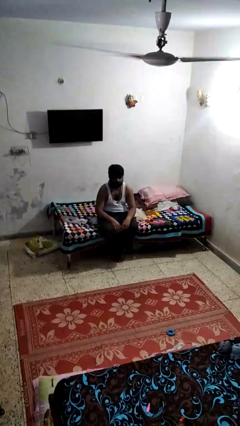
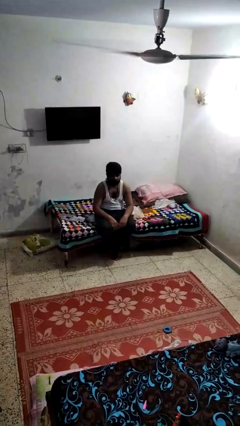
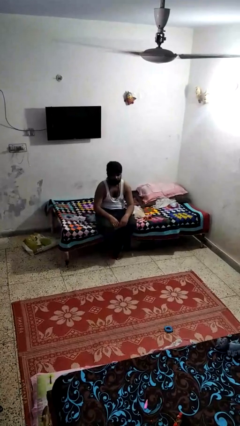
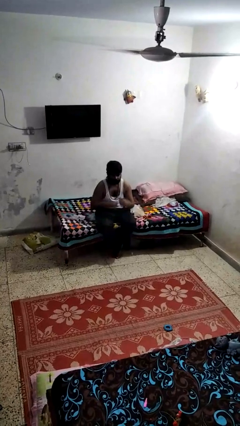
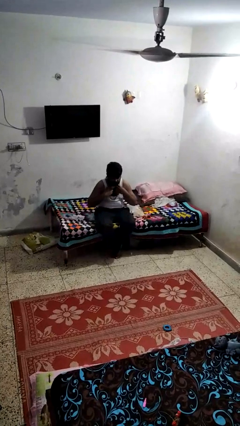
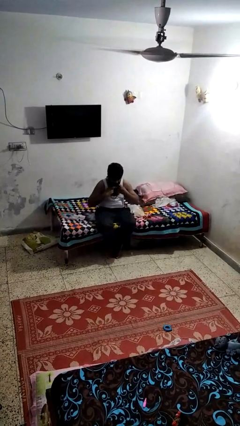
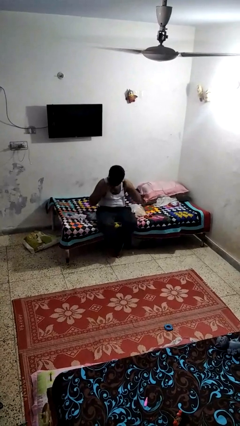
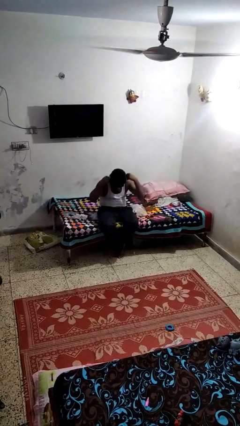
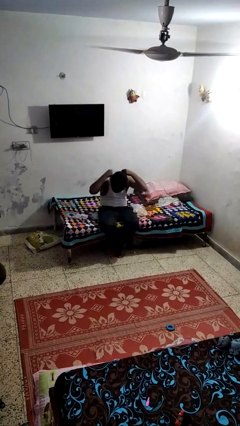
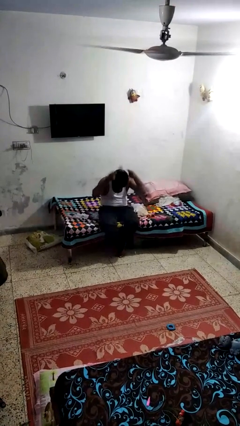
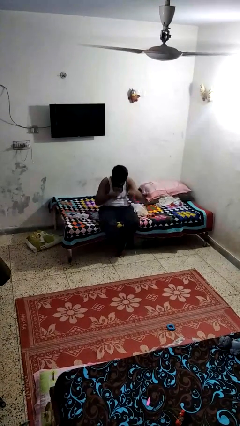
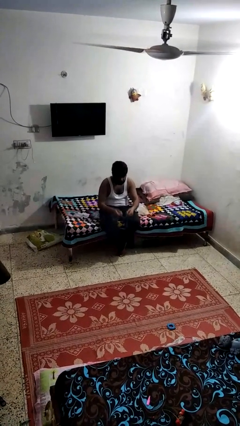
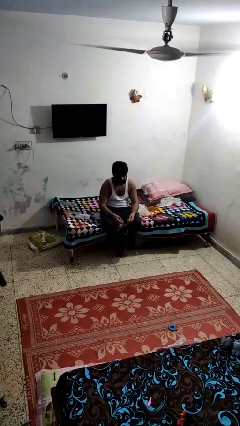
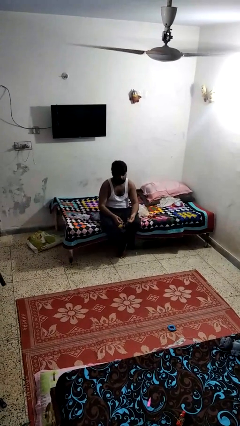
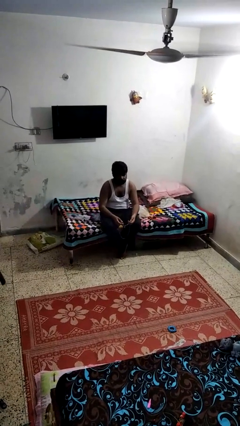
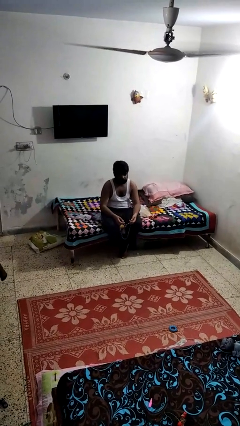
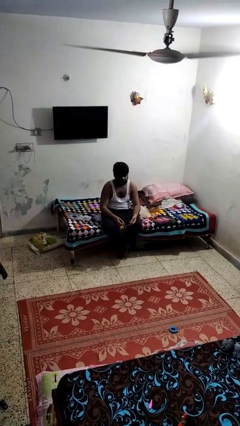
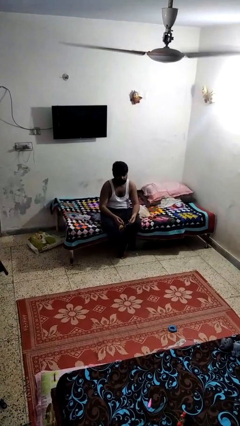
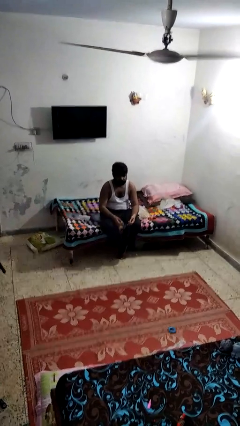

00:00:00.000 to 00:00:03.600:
person takes off necklace

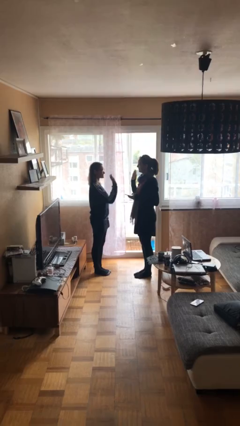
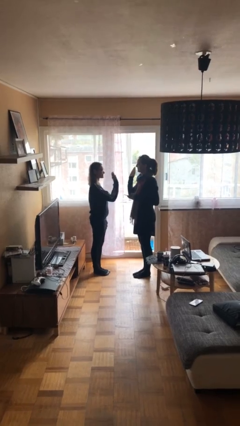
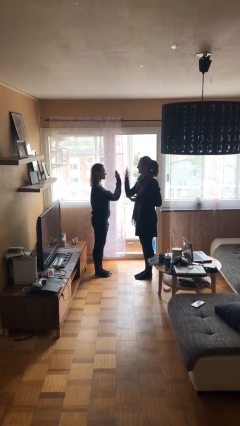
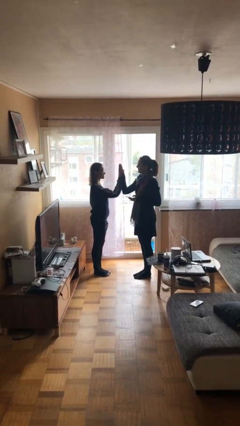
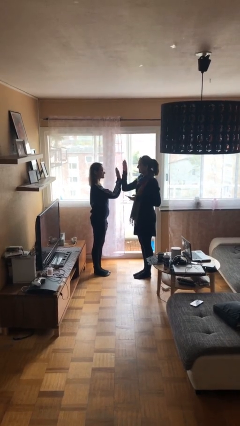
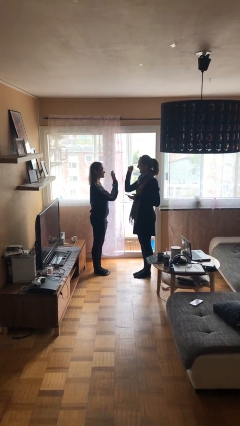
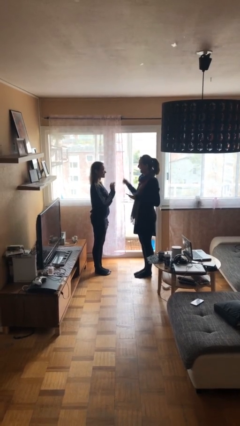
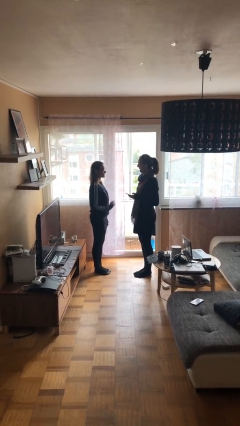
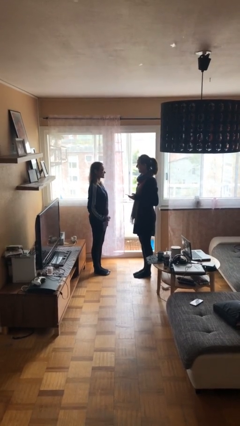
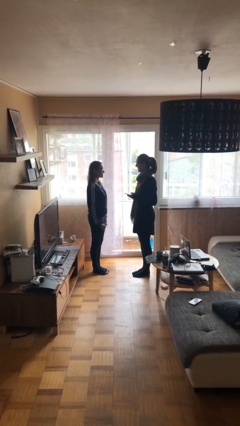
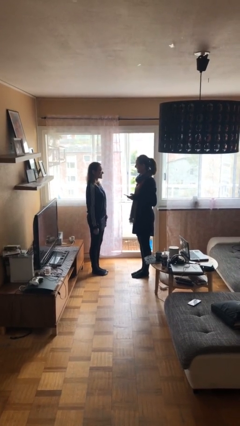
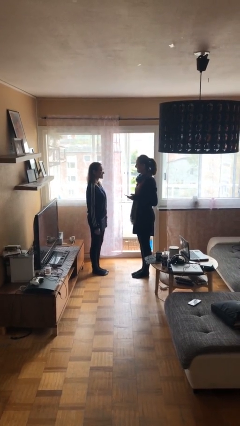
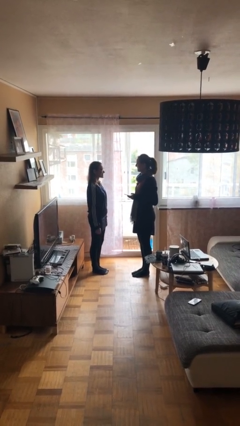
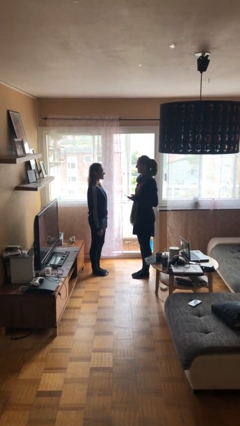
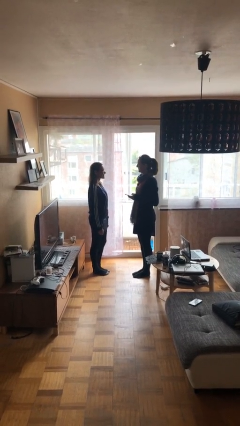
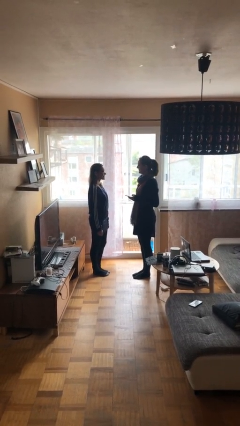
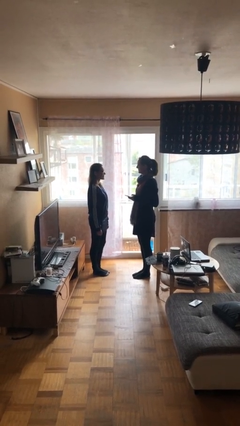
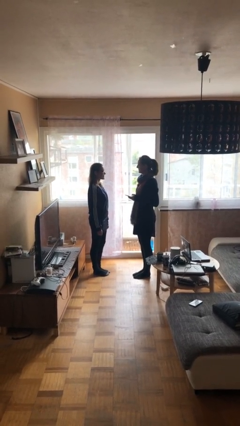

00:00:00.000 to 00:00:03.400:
person highfives hand

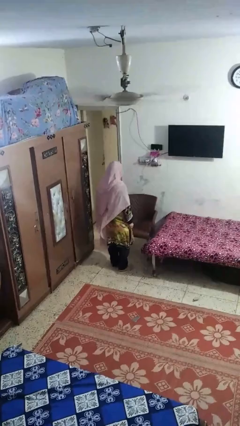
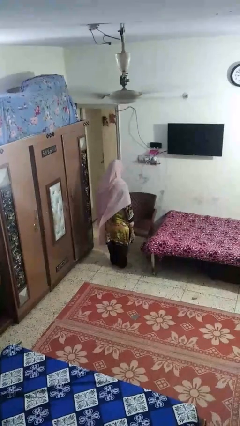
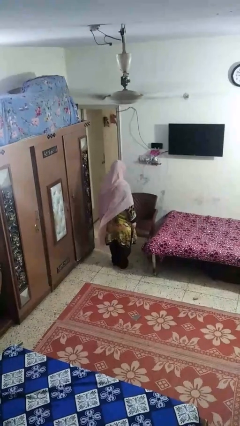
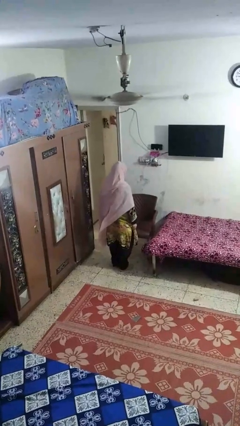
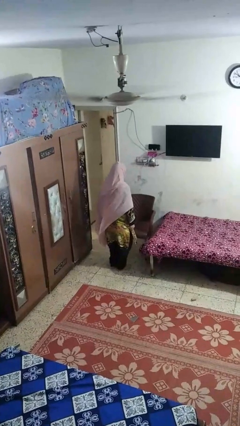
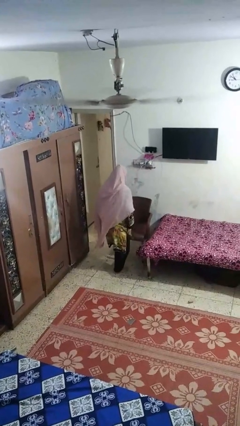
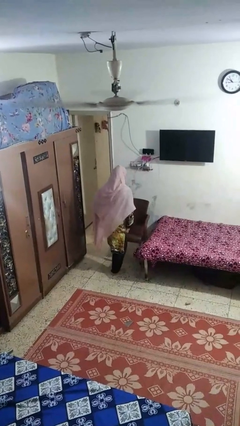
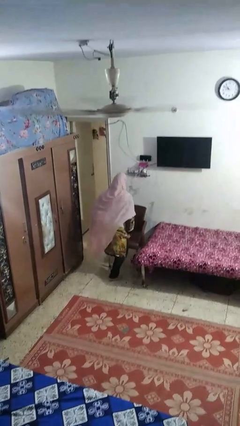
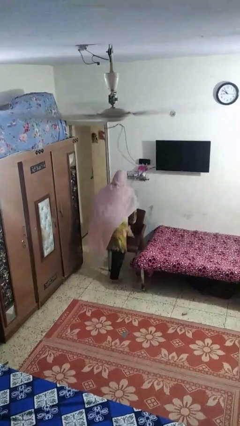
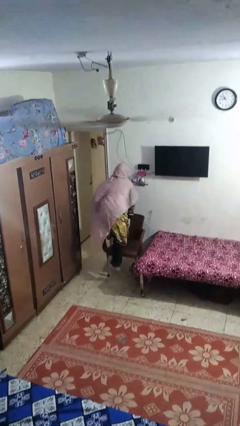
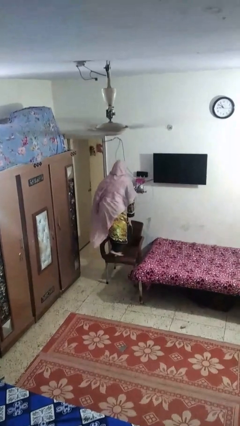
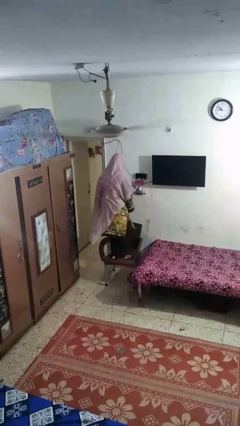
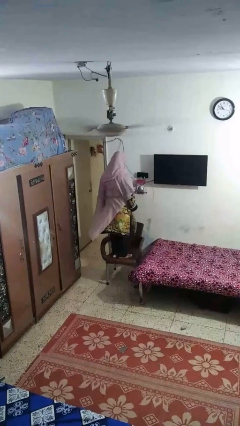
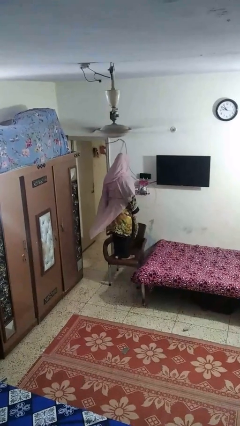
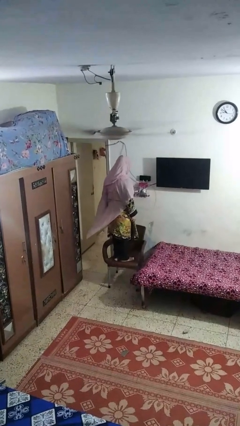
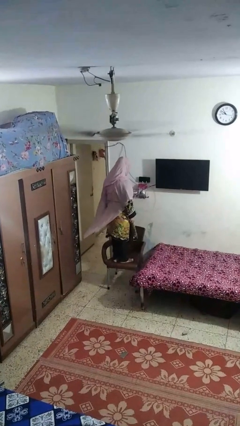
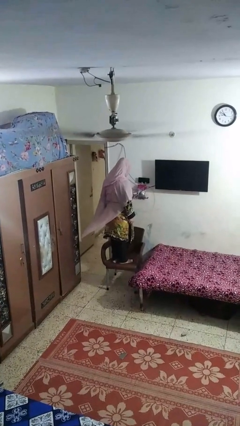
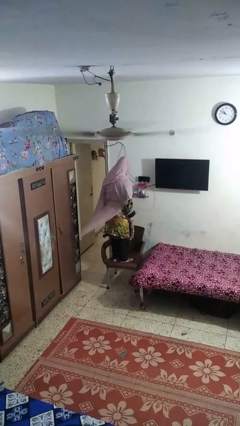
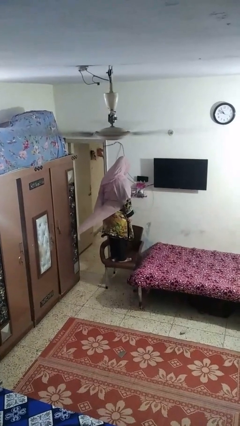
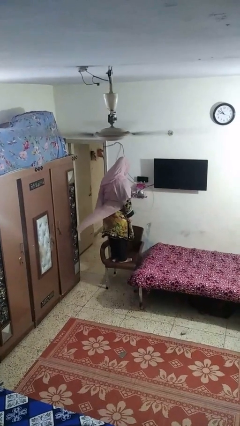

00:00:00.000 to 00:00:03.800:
person climbs on chair

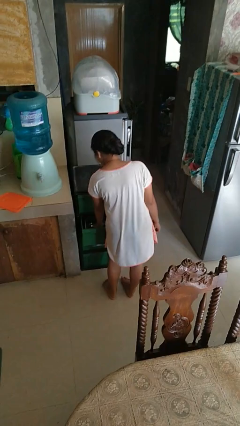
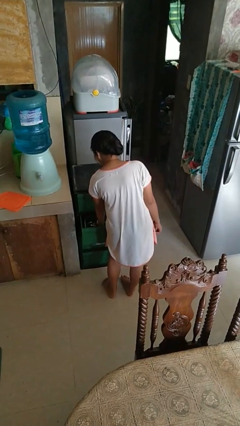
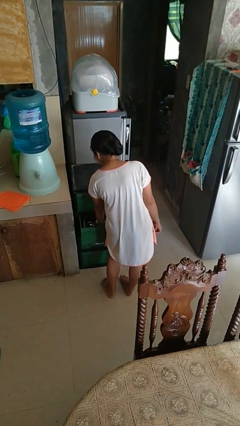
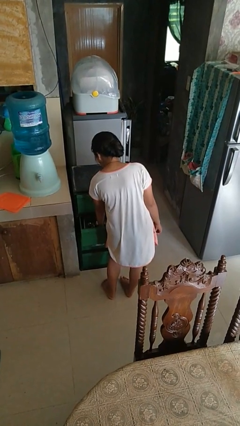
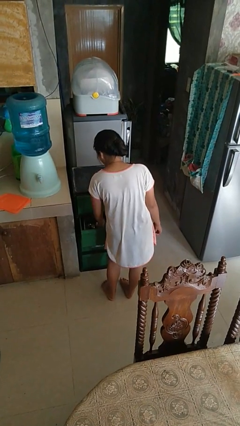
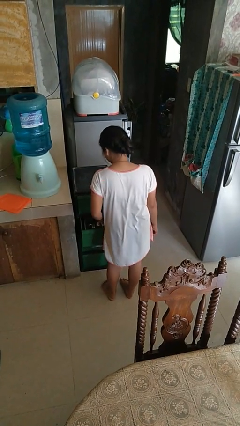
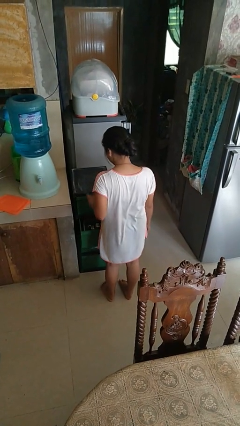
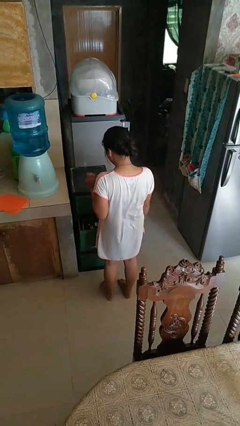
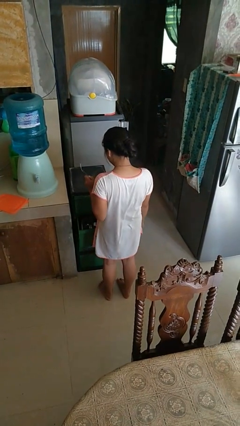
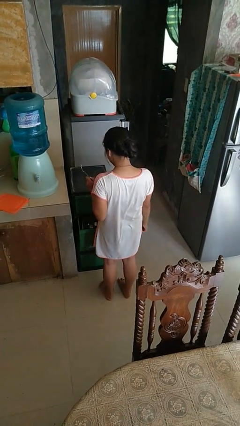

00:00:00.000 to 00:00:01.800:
person takes object from kitchen drawer

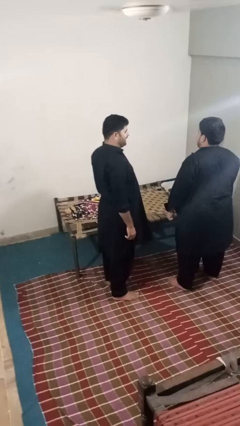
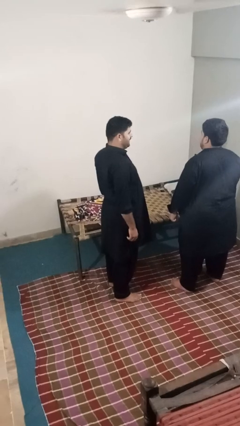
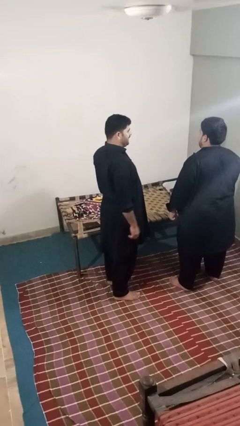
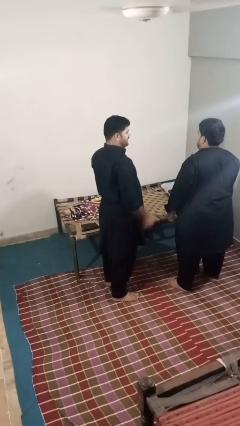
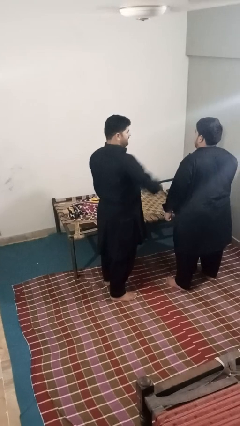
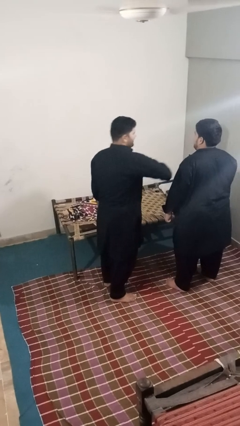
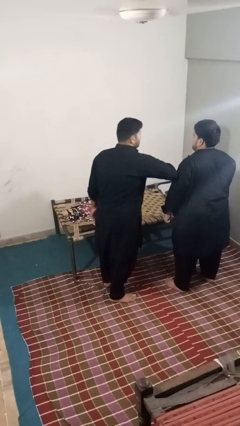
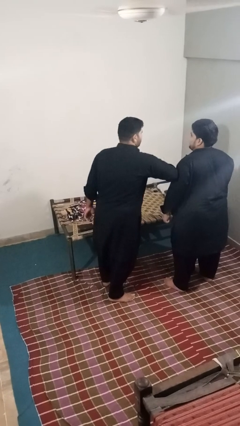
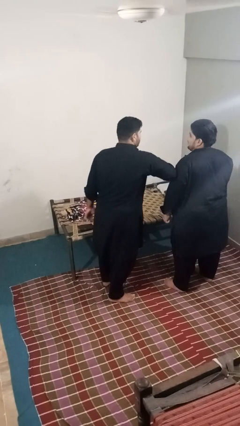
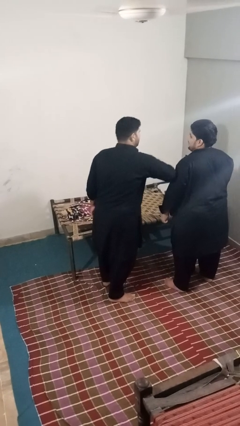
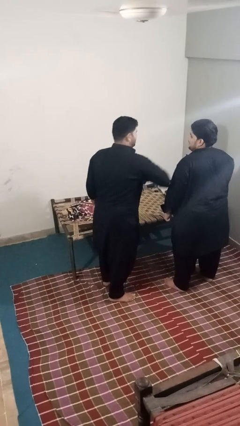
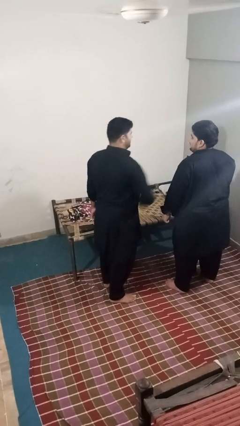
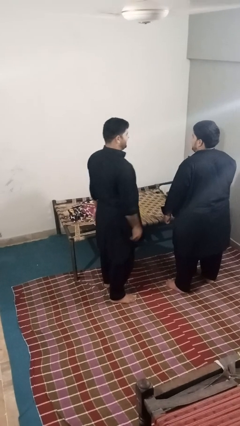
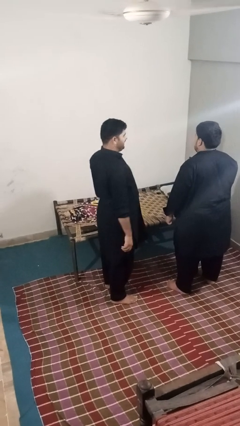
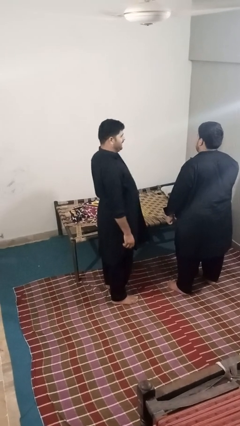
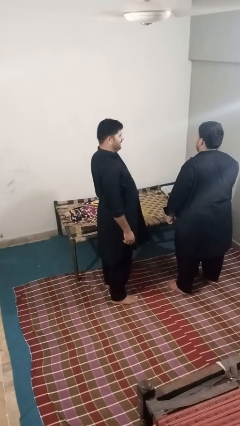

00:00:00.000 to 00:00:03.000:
person nudges person with elbow

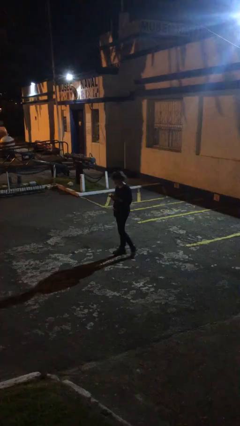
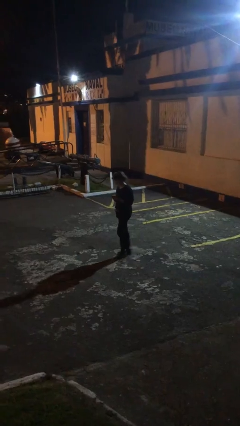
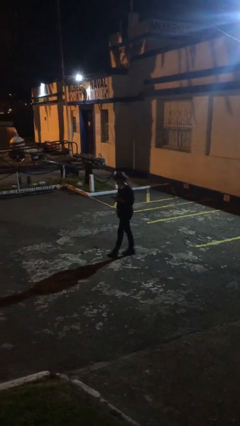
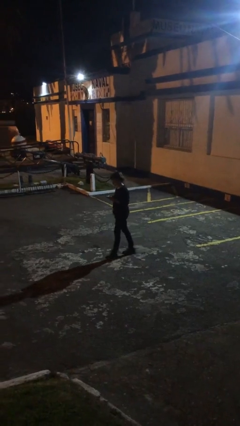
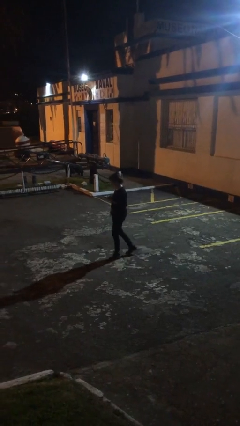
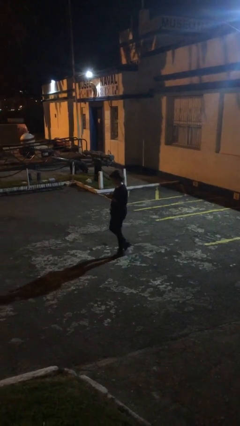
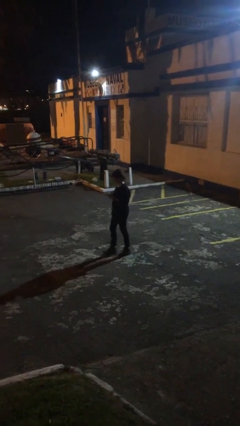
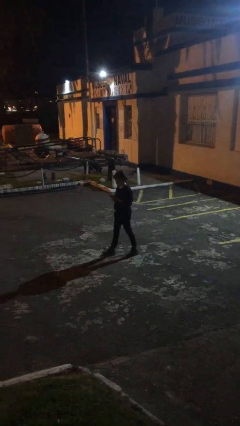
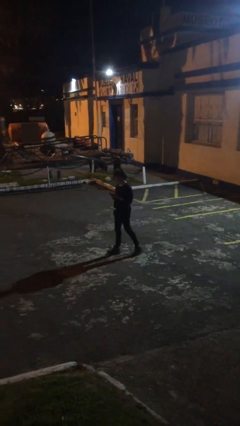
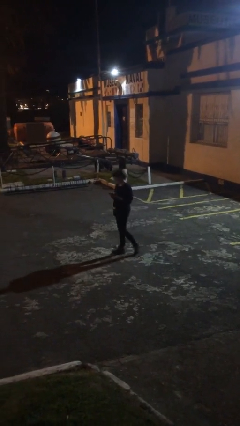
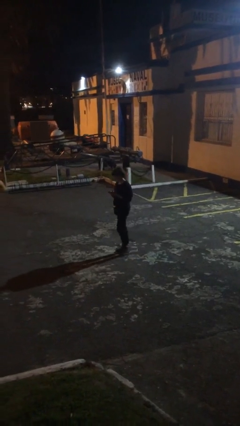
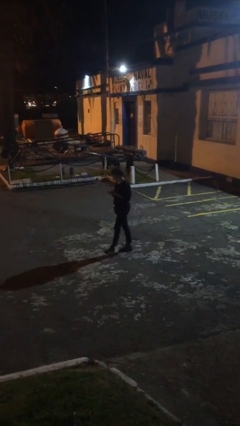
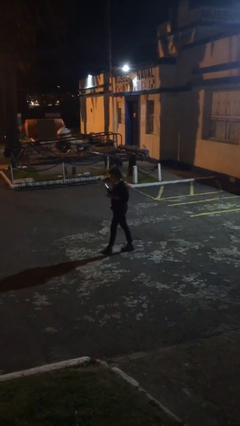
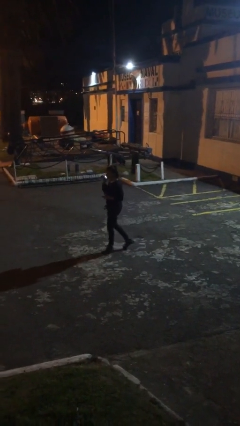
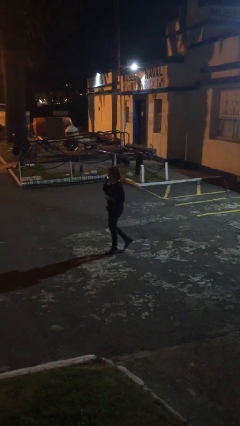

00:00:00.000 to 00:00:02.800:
person texts on phone
